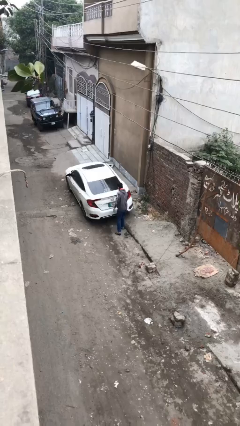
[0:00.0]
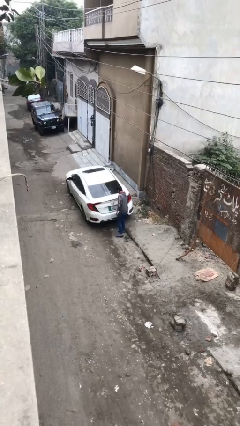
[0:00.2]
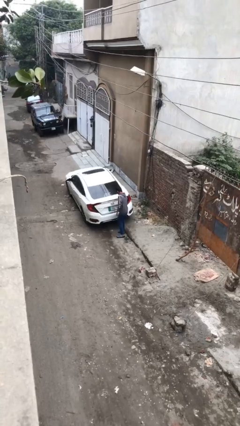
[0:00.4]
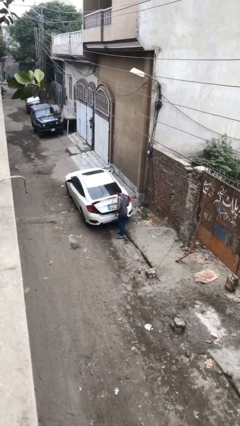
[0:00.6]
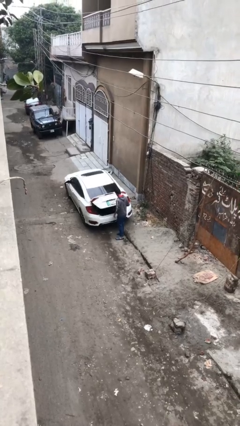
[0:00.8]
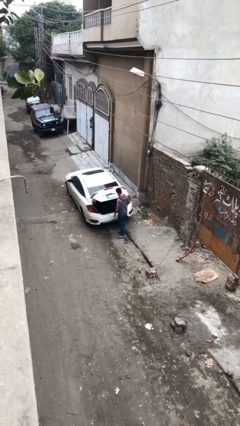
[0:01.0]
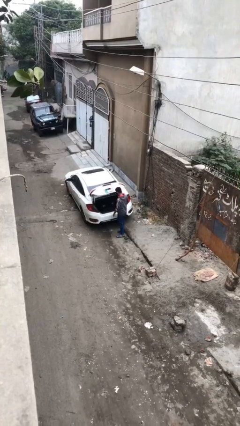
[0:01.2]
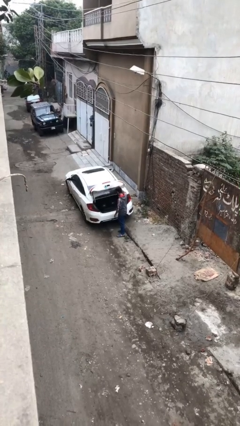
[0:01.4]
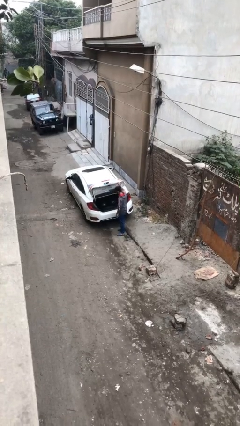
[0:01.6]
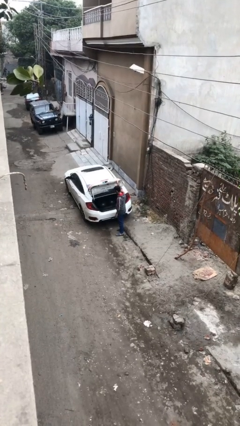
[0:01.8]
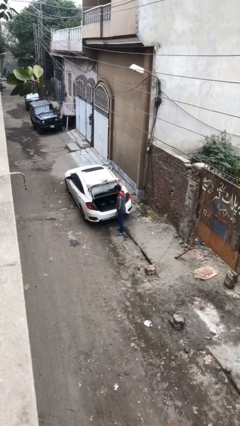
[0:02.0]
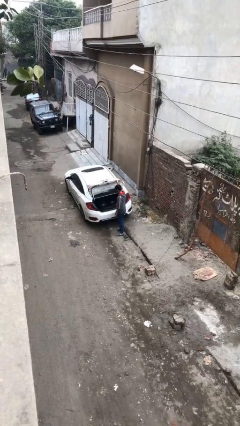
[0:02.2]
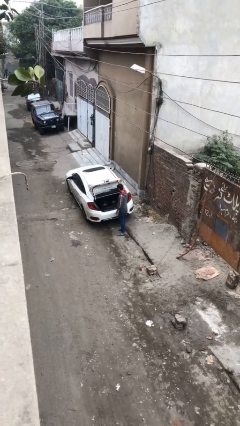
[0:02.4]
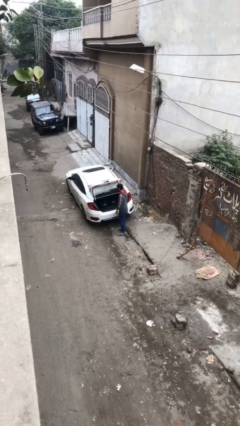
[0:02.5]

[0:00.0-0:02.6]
person opens car trunk

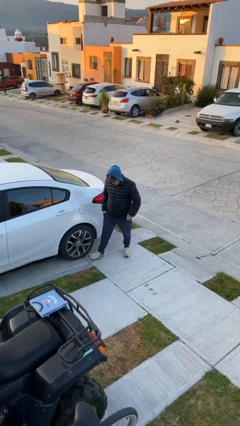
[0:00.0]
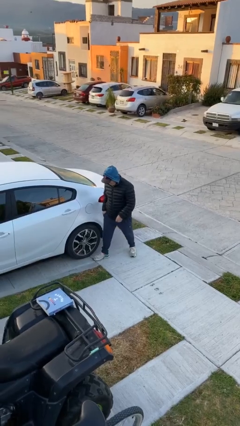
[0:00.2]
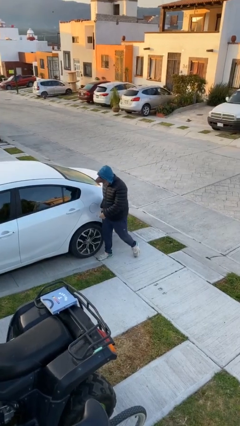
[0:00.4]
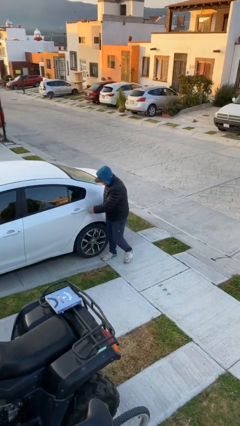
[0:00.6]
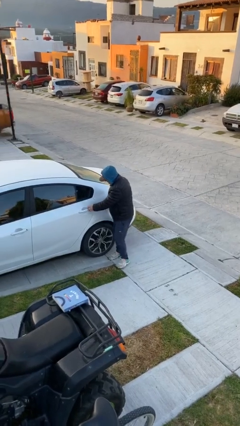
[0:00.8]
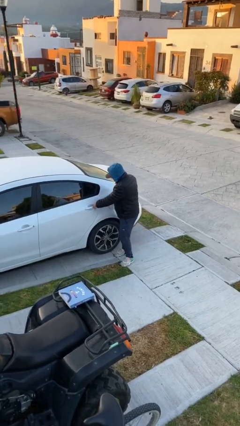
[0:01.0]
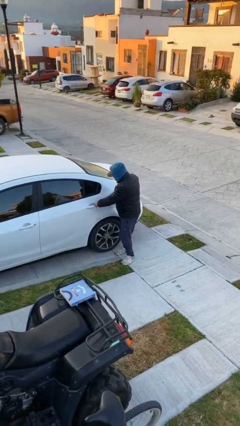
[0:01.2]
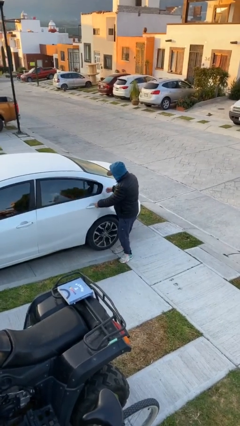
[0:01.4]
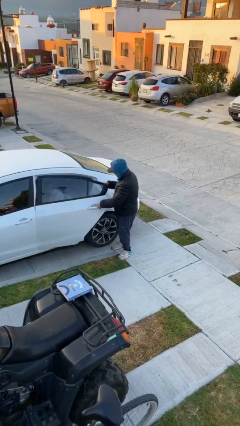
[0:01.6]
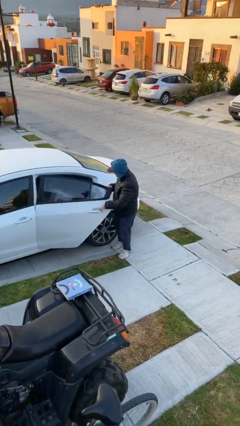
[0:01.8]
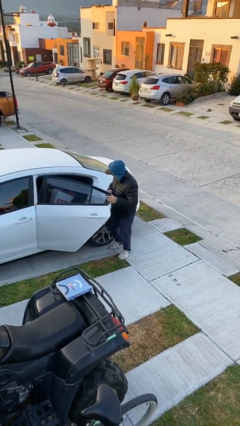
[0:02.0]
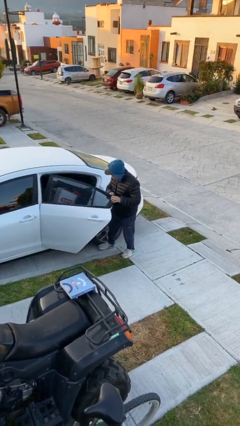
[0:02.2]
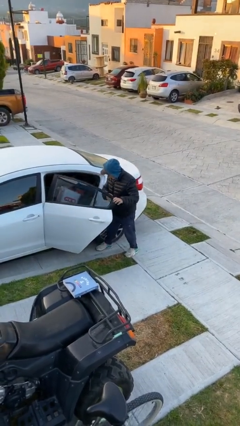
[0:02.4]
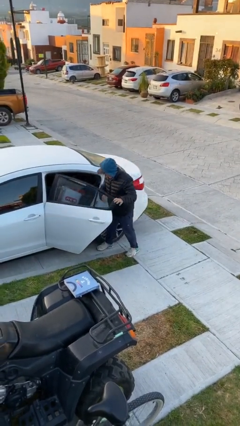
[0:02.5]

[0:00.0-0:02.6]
person opens car door

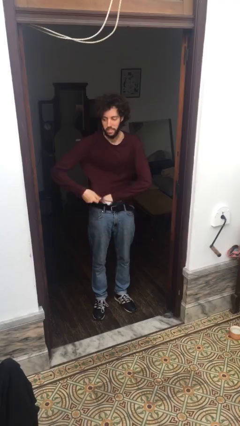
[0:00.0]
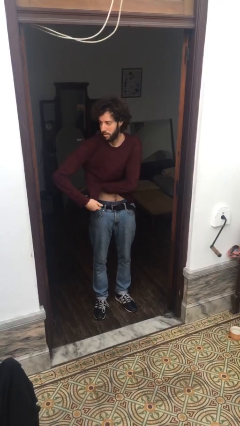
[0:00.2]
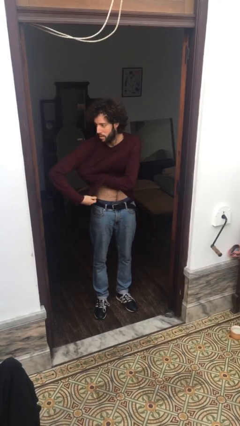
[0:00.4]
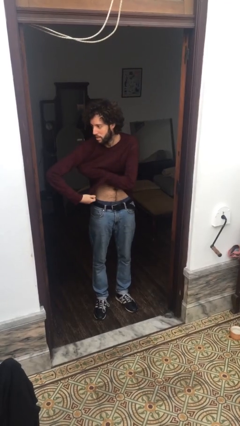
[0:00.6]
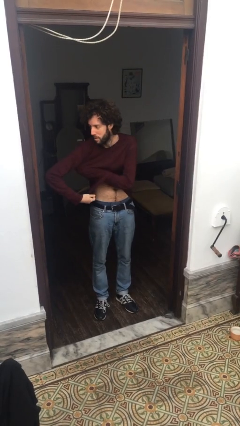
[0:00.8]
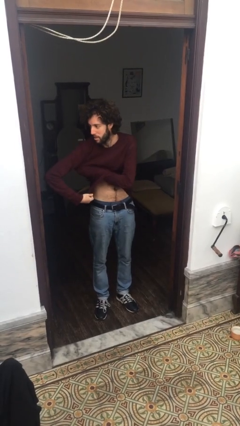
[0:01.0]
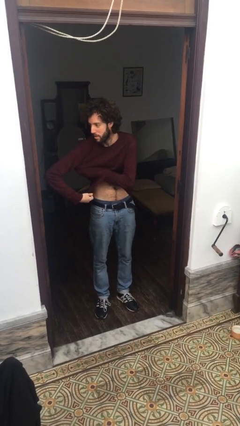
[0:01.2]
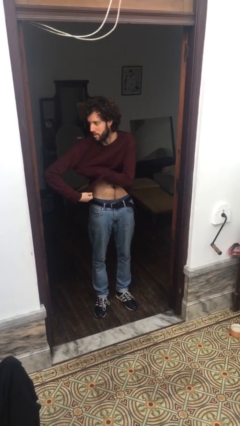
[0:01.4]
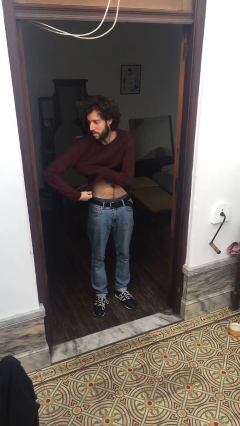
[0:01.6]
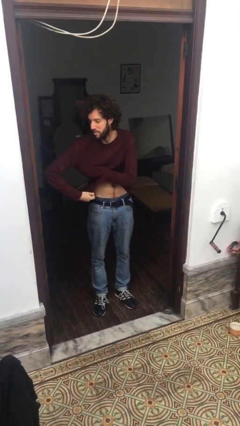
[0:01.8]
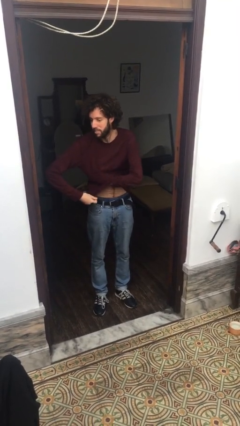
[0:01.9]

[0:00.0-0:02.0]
person applies deodorant

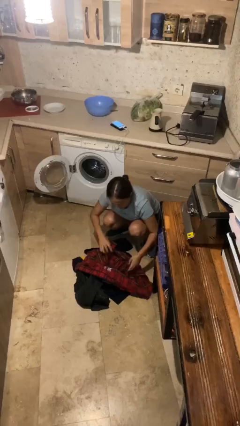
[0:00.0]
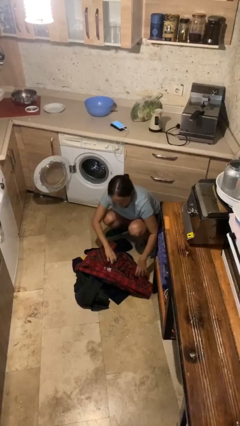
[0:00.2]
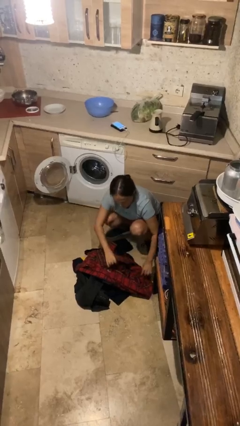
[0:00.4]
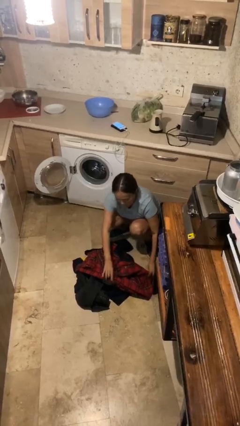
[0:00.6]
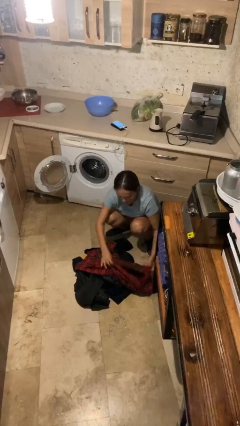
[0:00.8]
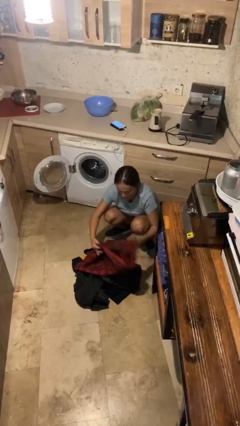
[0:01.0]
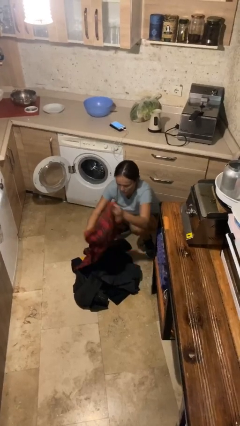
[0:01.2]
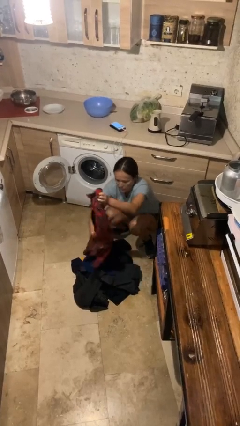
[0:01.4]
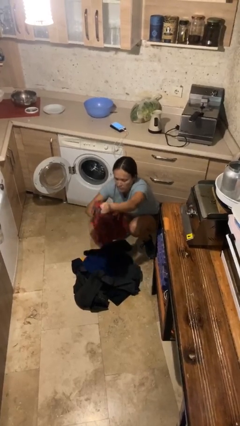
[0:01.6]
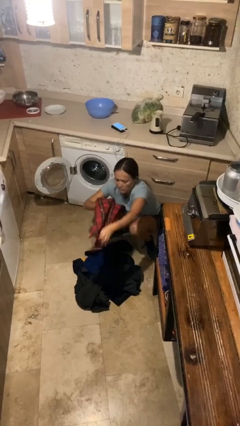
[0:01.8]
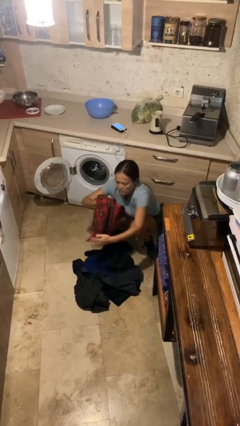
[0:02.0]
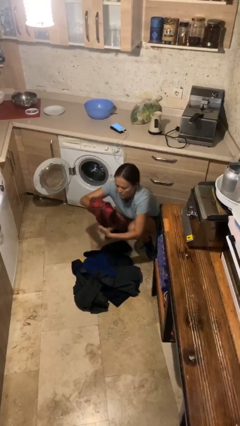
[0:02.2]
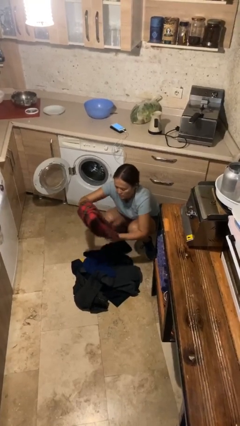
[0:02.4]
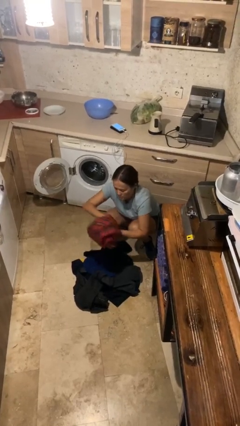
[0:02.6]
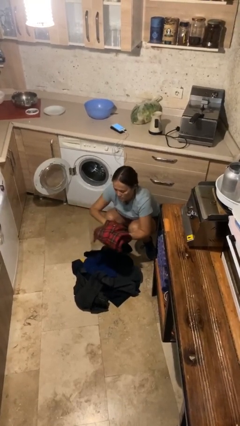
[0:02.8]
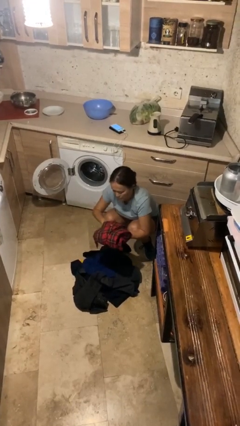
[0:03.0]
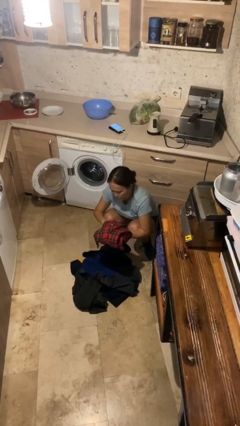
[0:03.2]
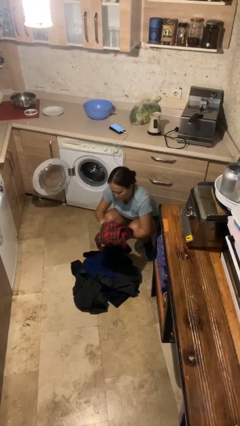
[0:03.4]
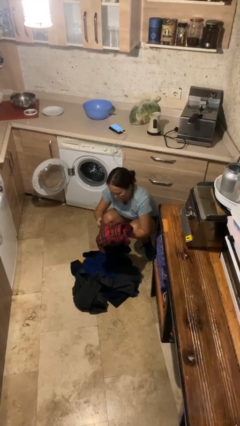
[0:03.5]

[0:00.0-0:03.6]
person folds shirt

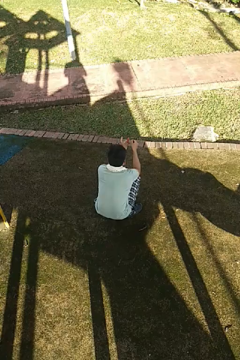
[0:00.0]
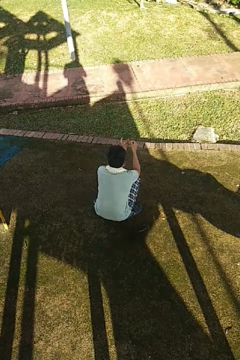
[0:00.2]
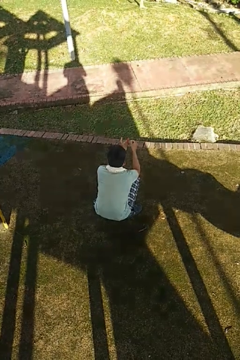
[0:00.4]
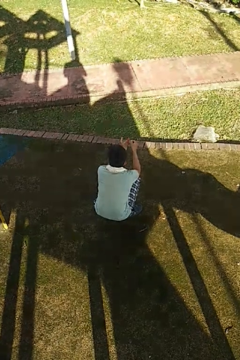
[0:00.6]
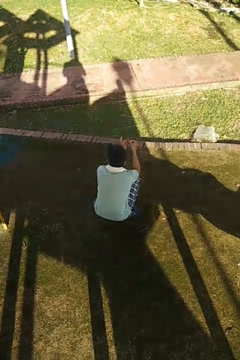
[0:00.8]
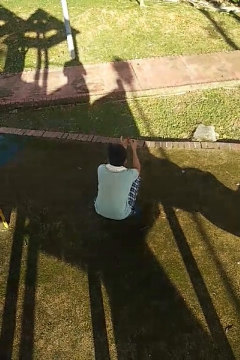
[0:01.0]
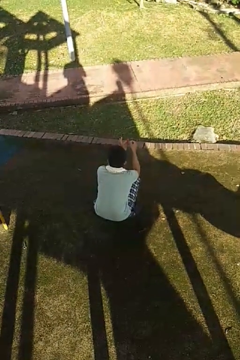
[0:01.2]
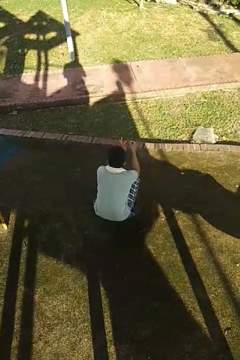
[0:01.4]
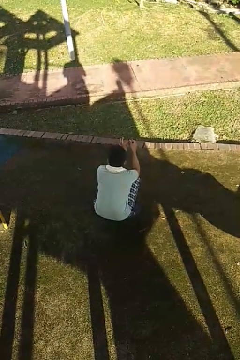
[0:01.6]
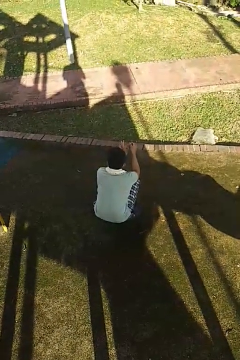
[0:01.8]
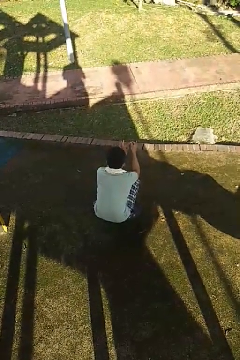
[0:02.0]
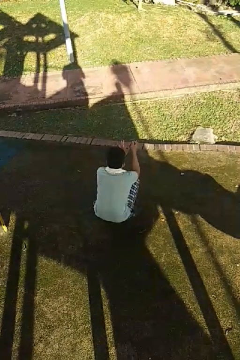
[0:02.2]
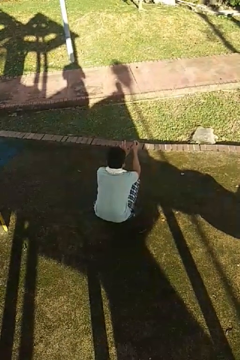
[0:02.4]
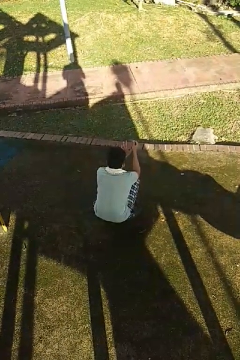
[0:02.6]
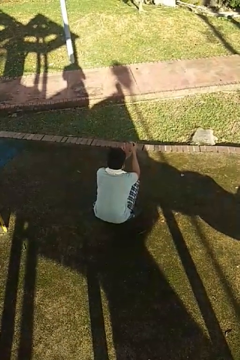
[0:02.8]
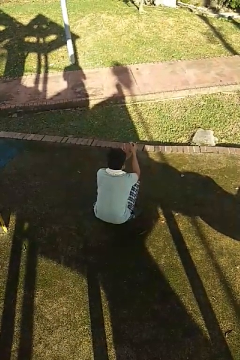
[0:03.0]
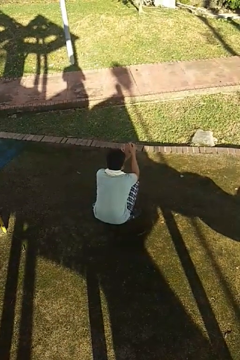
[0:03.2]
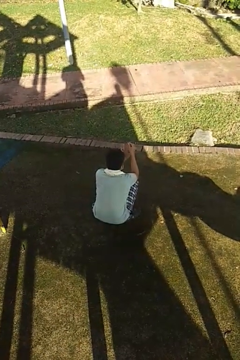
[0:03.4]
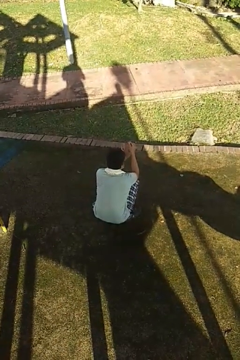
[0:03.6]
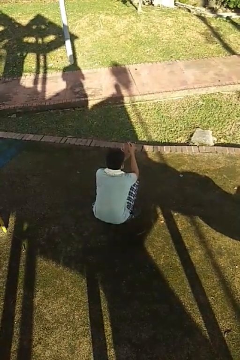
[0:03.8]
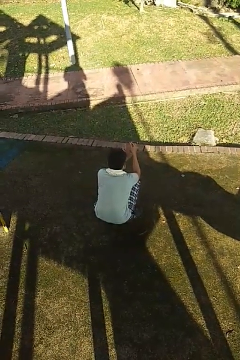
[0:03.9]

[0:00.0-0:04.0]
person paints fingernails

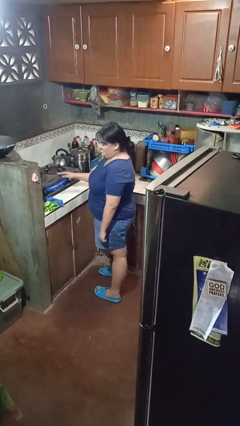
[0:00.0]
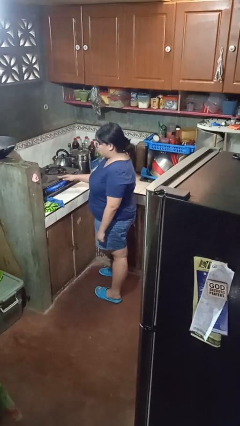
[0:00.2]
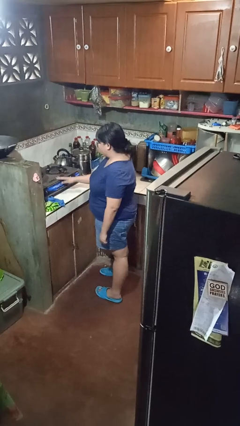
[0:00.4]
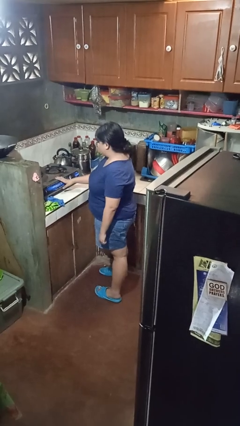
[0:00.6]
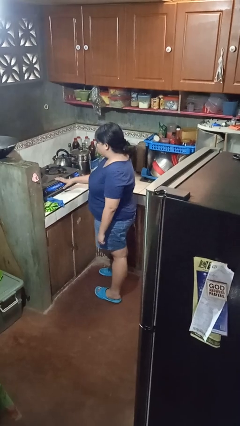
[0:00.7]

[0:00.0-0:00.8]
person burns hand

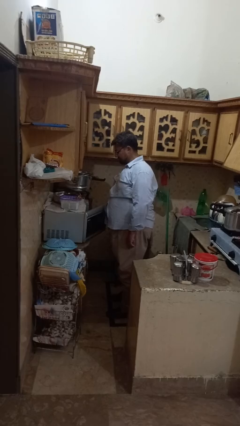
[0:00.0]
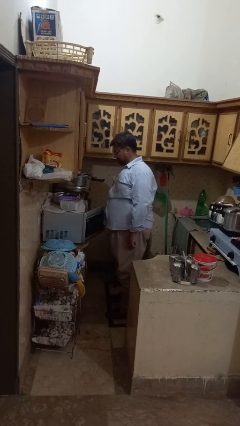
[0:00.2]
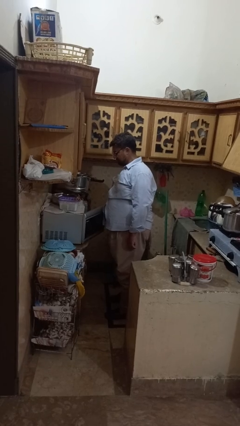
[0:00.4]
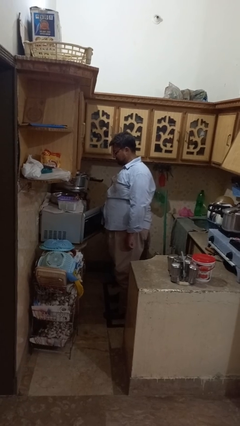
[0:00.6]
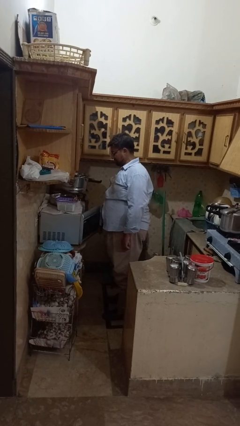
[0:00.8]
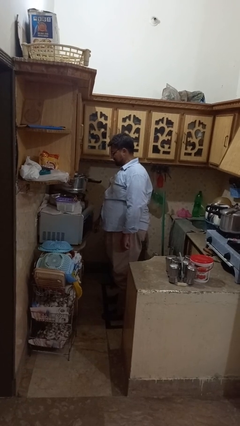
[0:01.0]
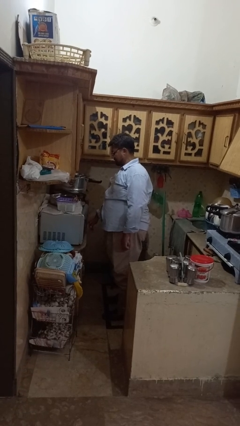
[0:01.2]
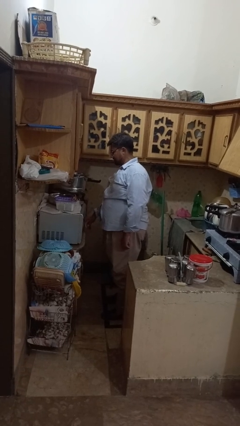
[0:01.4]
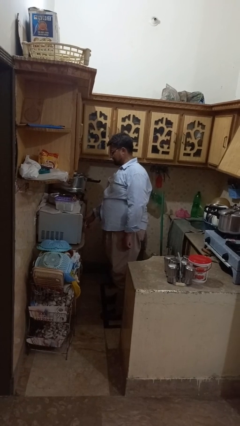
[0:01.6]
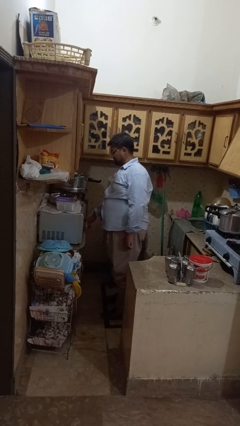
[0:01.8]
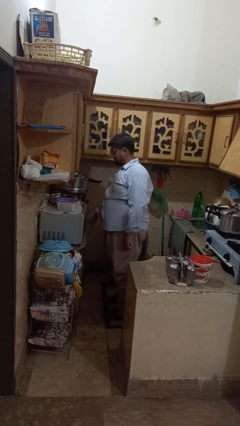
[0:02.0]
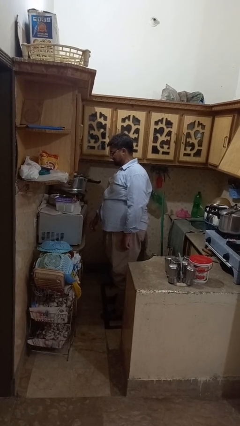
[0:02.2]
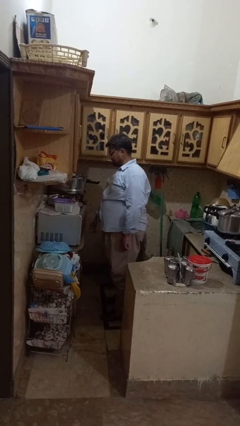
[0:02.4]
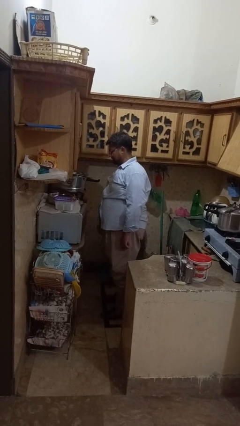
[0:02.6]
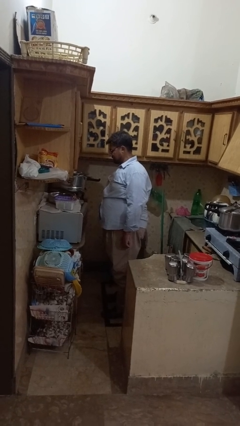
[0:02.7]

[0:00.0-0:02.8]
person closes microwave
